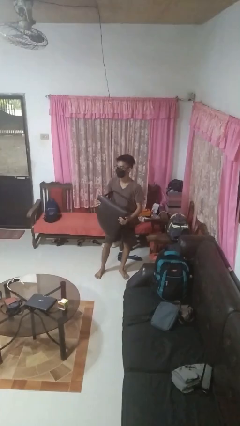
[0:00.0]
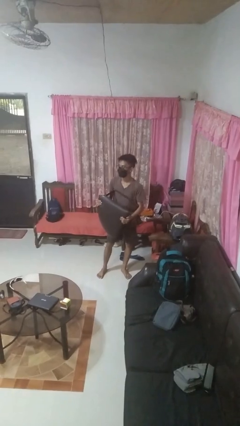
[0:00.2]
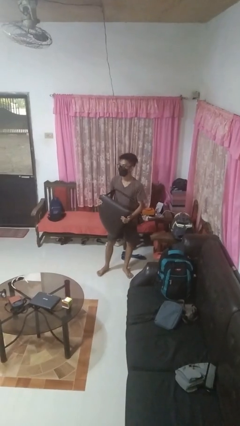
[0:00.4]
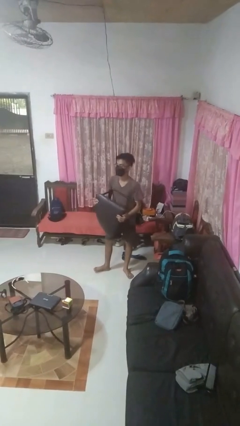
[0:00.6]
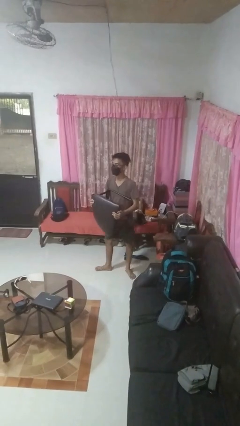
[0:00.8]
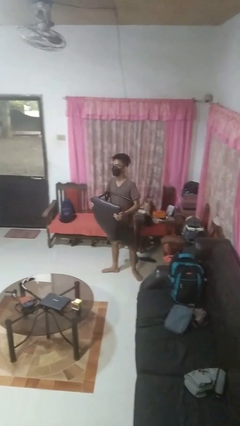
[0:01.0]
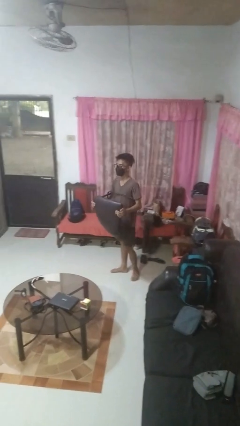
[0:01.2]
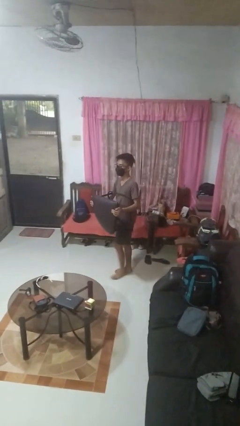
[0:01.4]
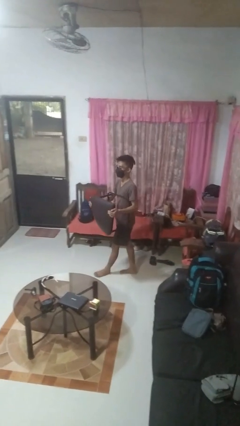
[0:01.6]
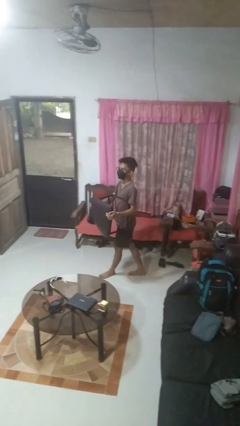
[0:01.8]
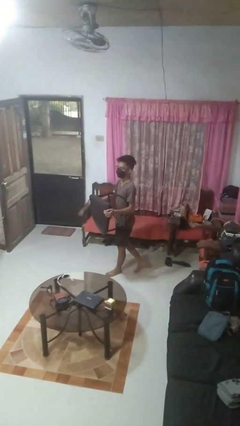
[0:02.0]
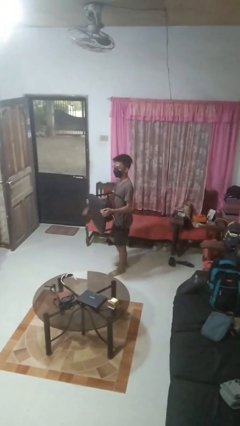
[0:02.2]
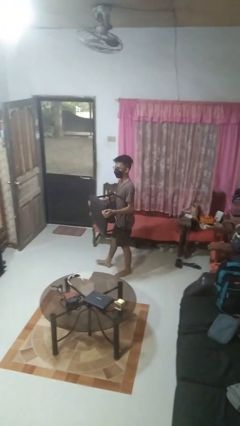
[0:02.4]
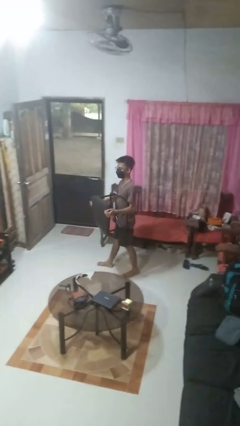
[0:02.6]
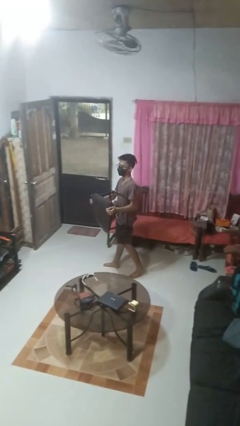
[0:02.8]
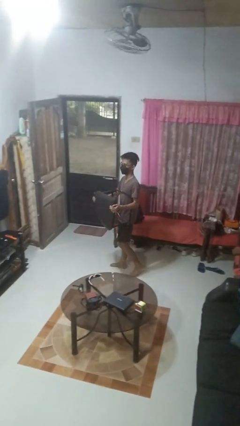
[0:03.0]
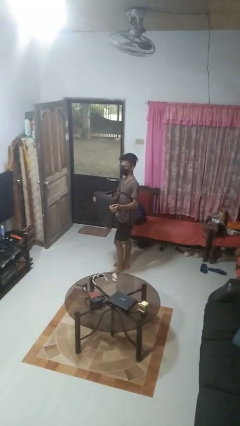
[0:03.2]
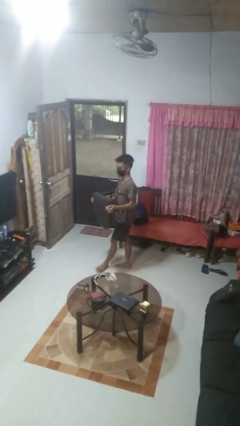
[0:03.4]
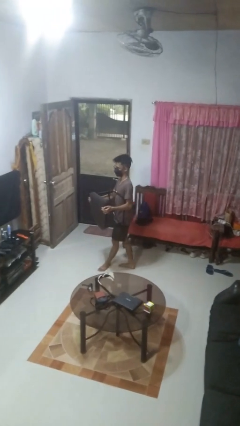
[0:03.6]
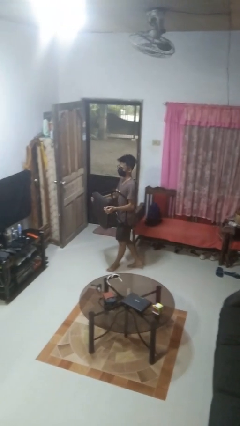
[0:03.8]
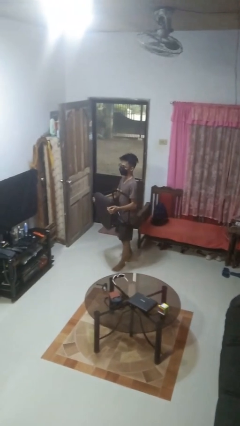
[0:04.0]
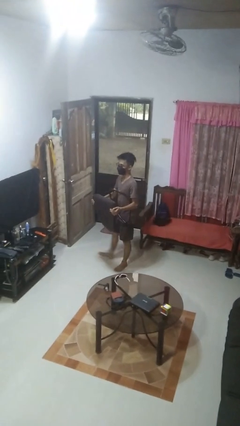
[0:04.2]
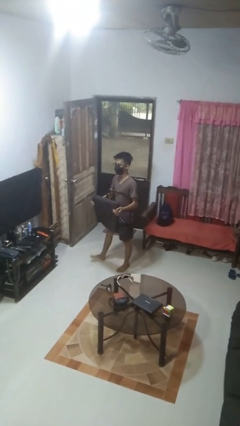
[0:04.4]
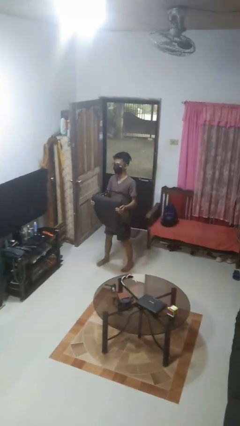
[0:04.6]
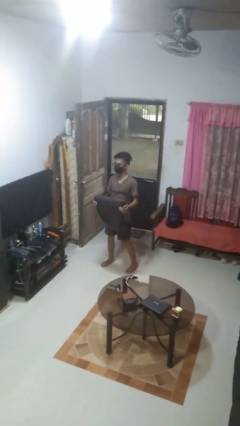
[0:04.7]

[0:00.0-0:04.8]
person carries furniture

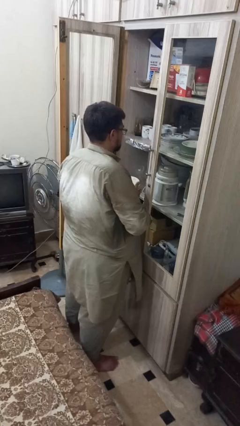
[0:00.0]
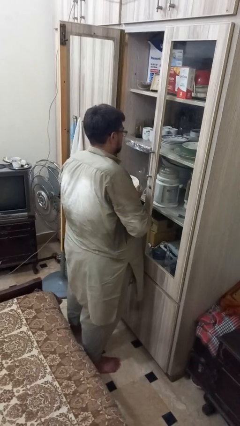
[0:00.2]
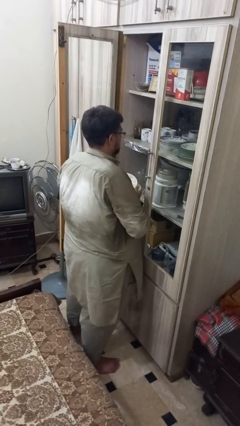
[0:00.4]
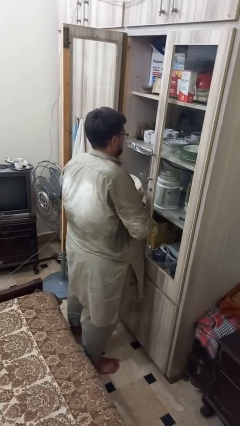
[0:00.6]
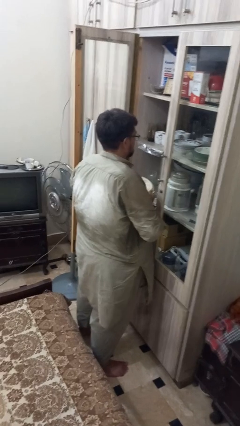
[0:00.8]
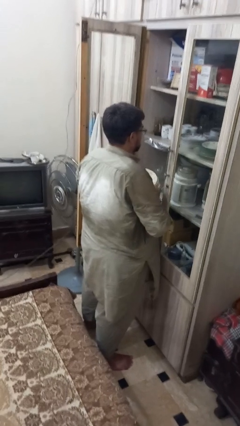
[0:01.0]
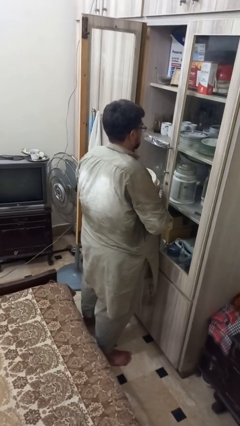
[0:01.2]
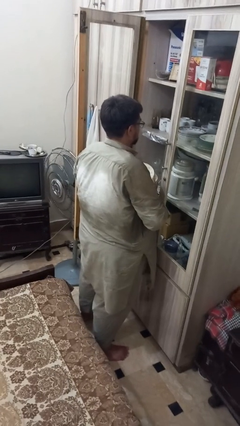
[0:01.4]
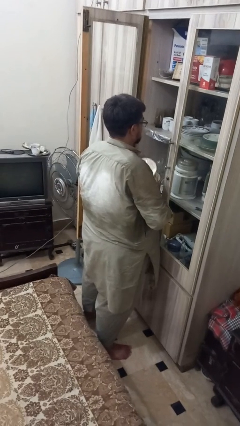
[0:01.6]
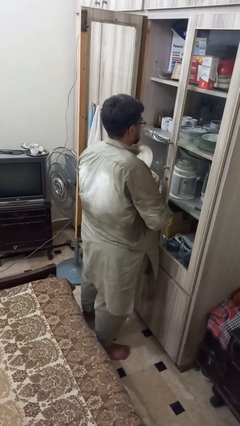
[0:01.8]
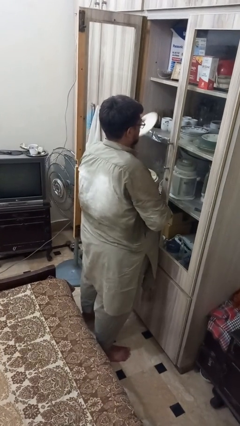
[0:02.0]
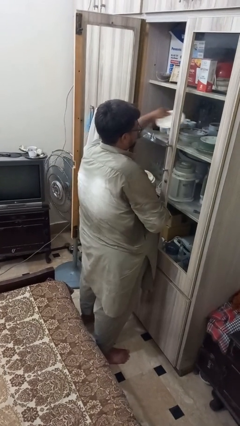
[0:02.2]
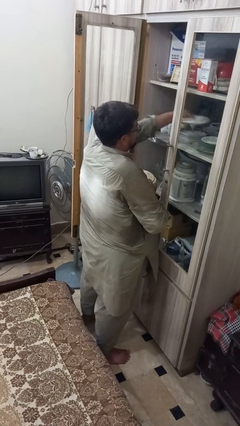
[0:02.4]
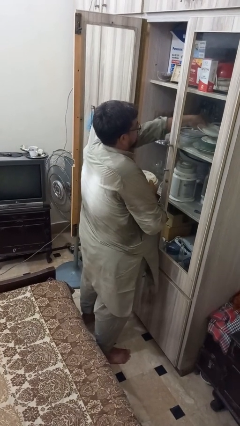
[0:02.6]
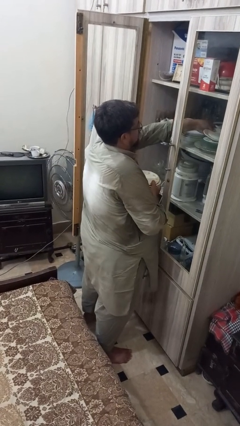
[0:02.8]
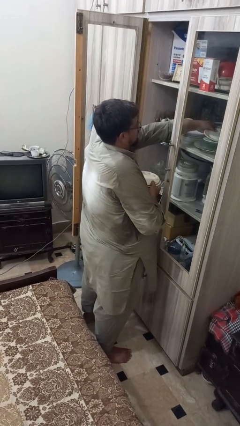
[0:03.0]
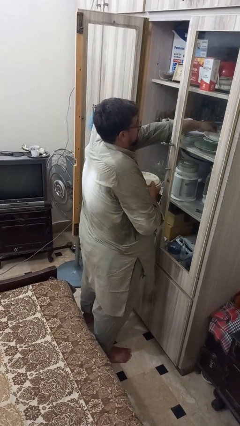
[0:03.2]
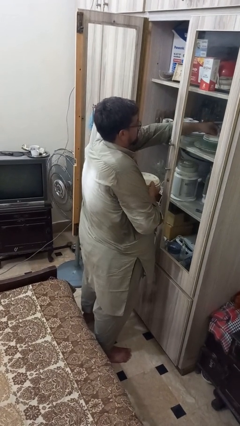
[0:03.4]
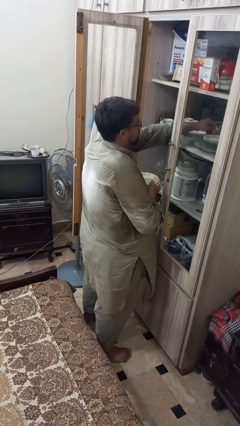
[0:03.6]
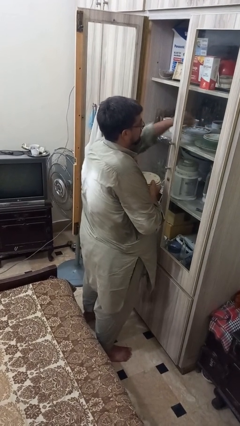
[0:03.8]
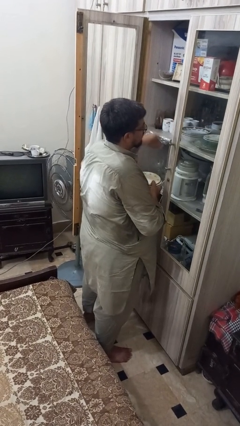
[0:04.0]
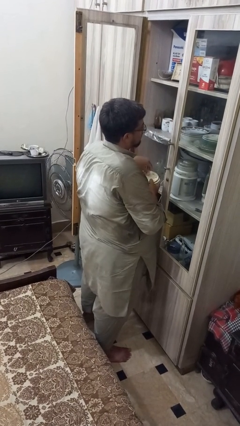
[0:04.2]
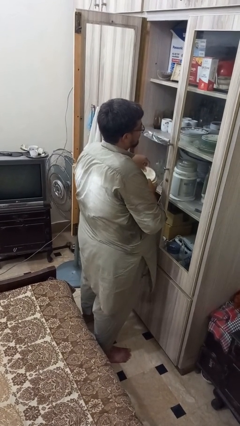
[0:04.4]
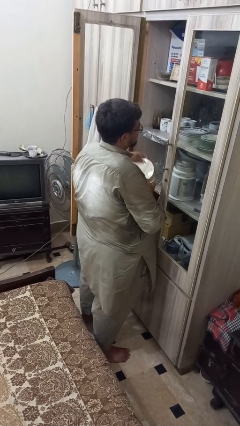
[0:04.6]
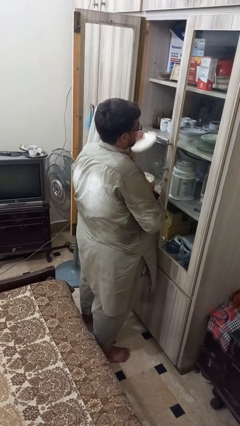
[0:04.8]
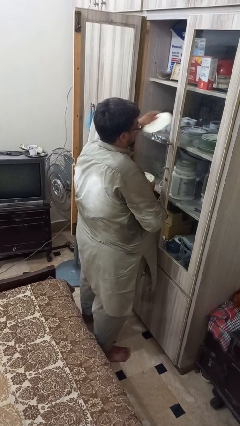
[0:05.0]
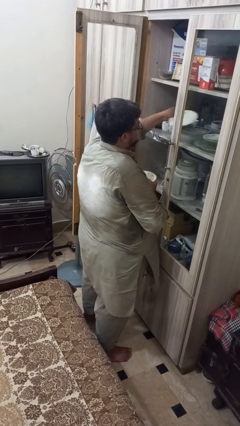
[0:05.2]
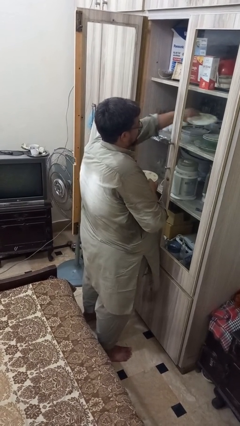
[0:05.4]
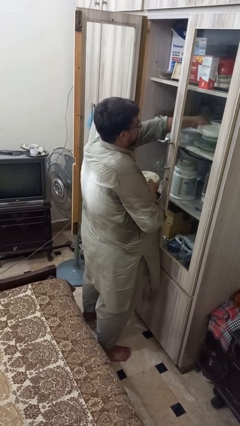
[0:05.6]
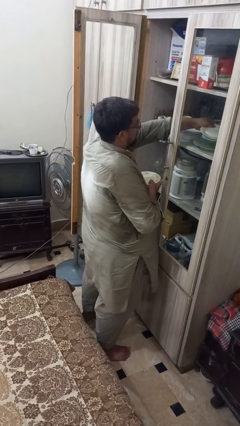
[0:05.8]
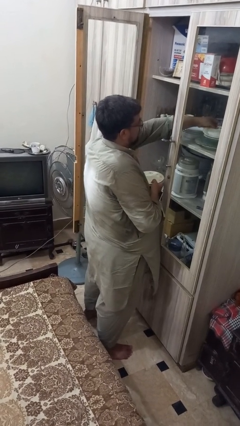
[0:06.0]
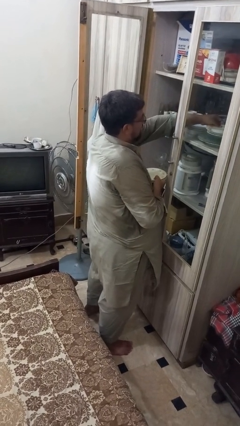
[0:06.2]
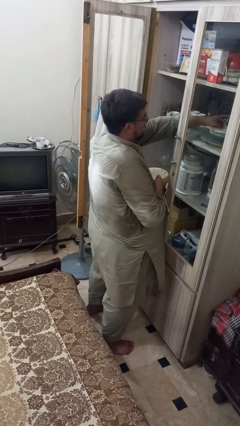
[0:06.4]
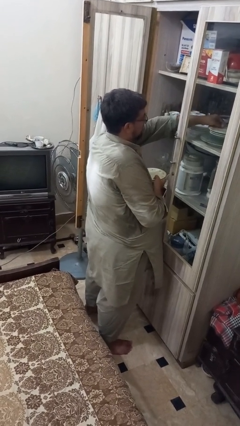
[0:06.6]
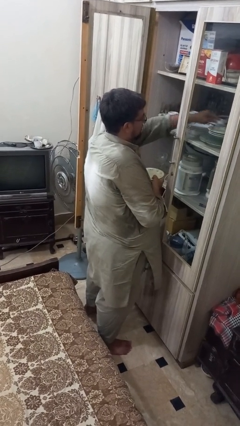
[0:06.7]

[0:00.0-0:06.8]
person loads groceries into cabinet

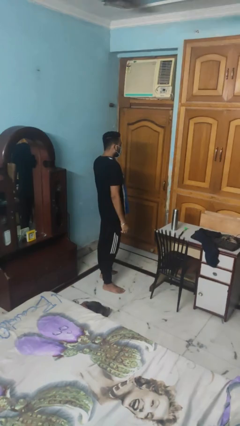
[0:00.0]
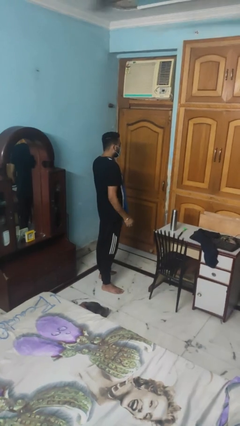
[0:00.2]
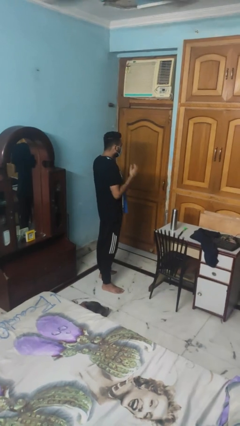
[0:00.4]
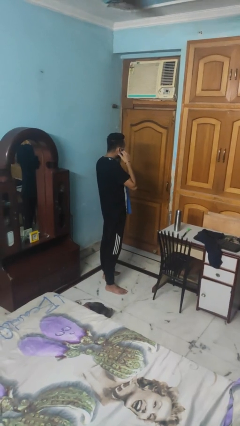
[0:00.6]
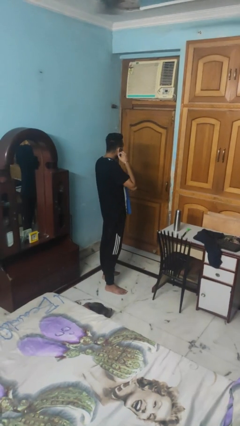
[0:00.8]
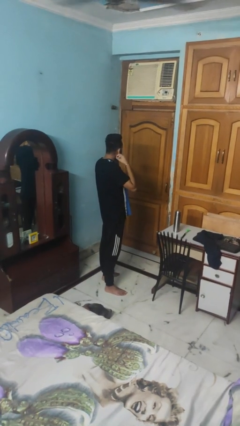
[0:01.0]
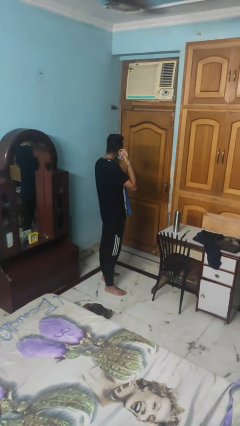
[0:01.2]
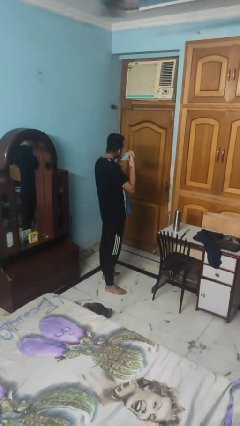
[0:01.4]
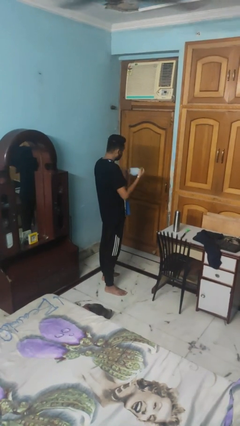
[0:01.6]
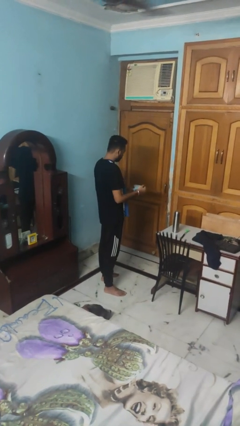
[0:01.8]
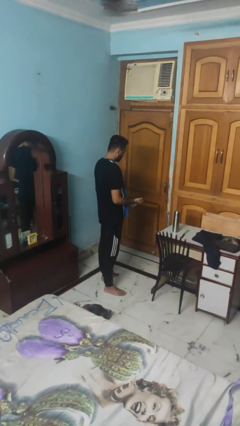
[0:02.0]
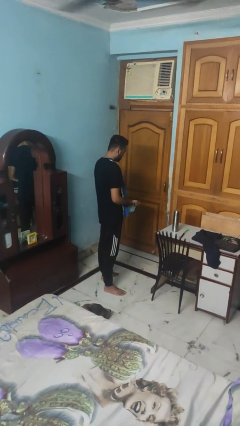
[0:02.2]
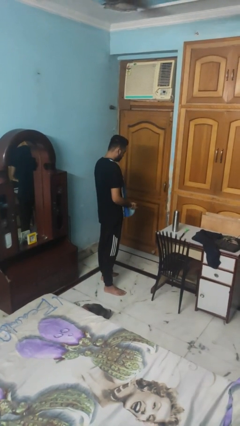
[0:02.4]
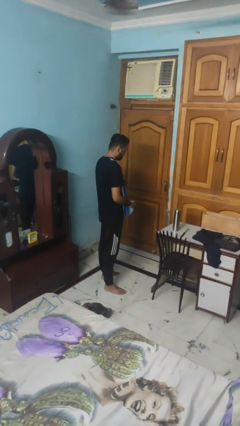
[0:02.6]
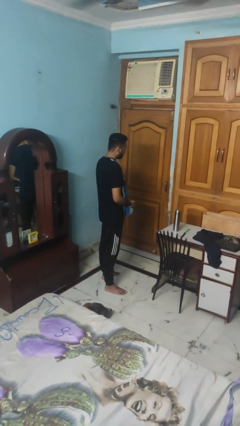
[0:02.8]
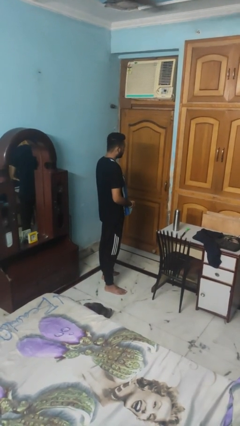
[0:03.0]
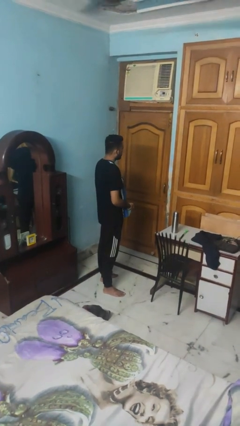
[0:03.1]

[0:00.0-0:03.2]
person takes off facemask

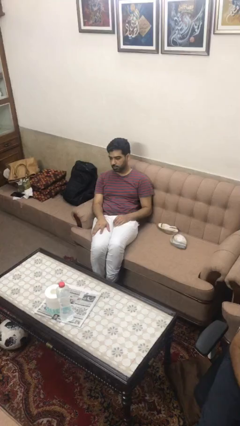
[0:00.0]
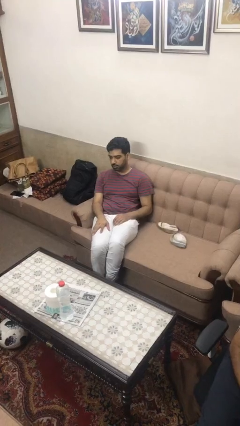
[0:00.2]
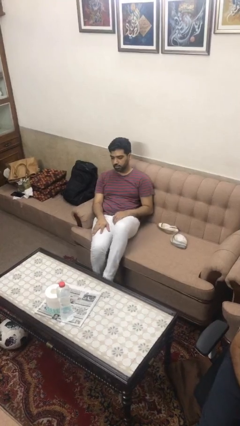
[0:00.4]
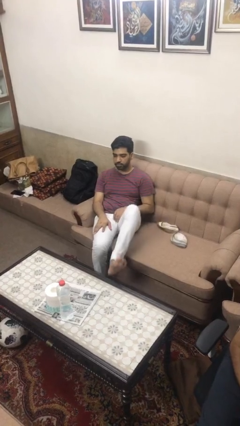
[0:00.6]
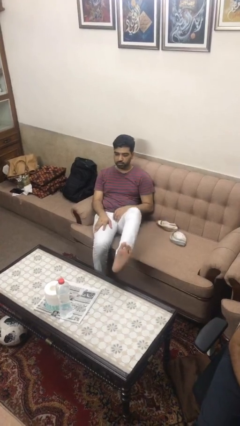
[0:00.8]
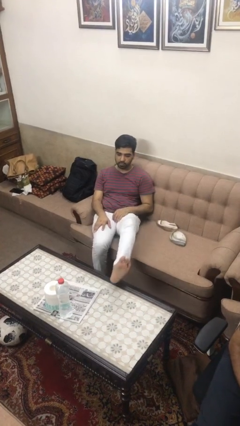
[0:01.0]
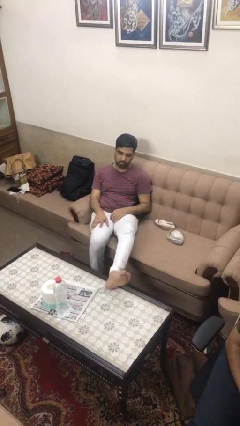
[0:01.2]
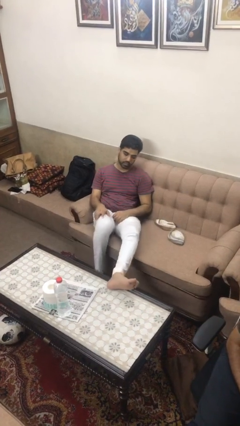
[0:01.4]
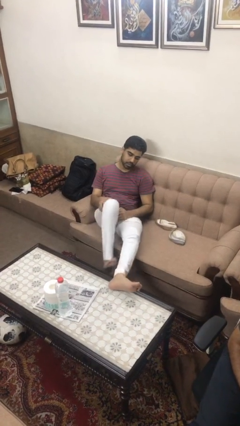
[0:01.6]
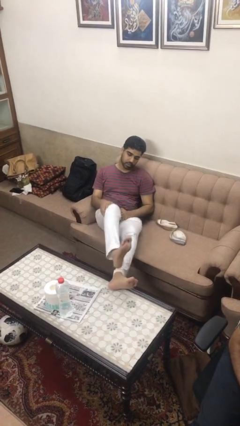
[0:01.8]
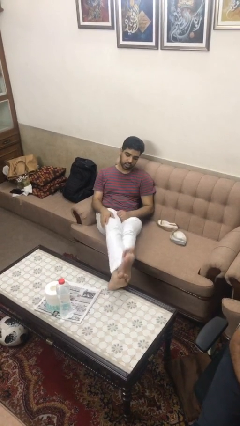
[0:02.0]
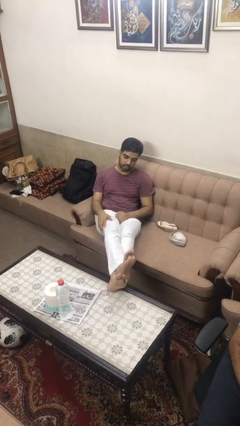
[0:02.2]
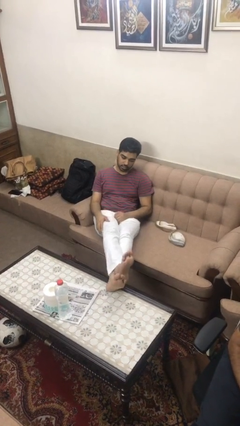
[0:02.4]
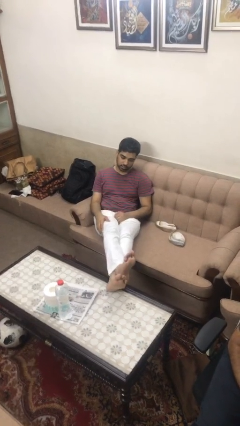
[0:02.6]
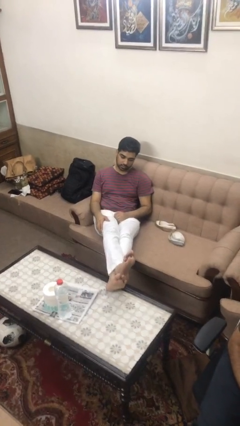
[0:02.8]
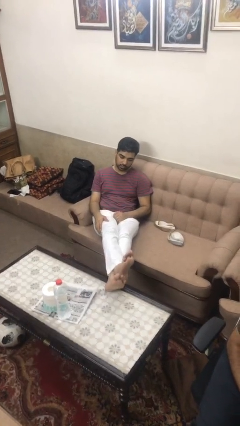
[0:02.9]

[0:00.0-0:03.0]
person puts feet up

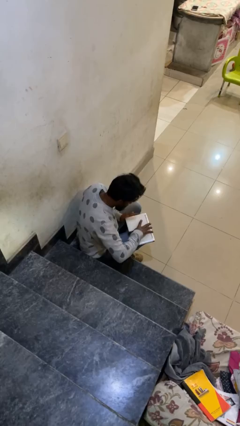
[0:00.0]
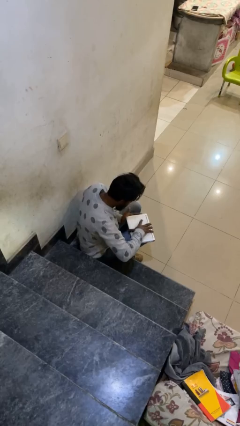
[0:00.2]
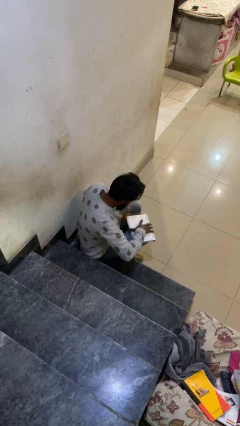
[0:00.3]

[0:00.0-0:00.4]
person interacts with laptop
